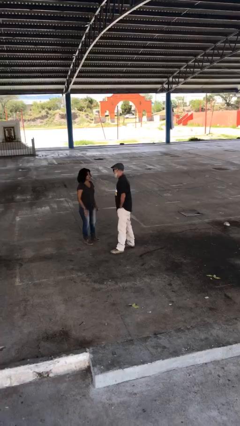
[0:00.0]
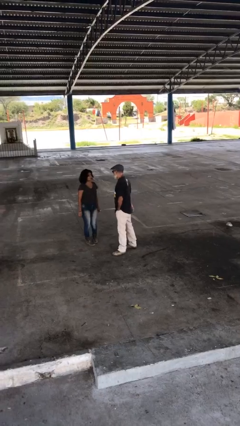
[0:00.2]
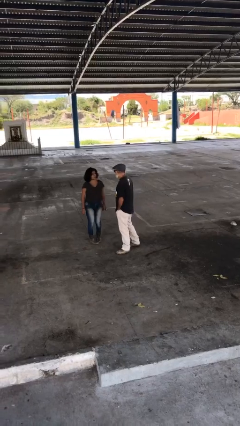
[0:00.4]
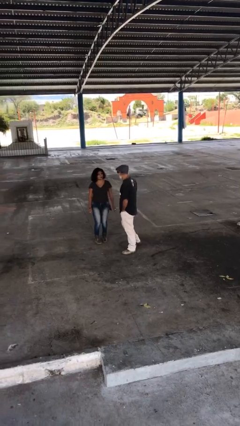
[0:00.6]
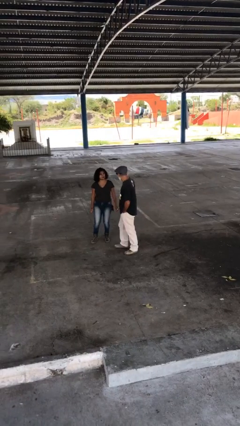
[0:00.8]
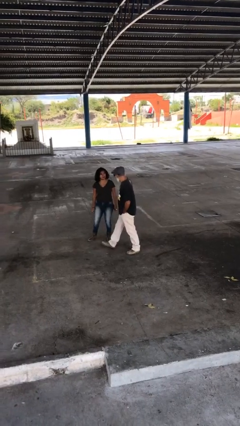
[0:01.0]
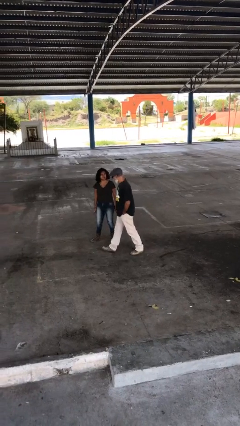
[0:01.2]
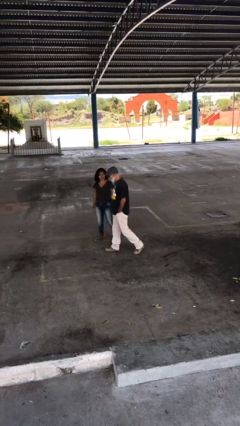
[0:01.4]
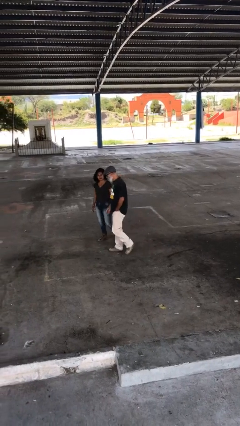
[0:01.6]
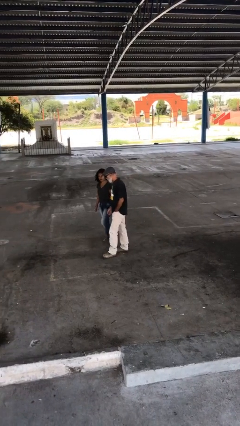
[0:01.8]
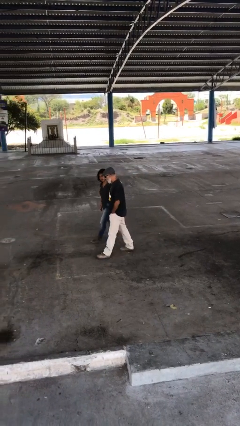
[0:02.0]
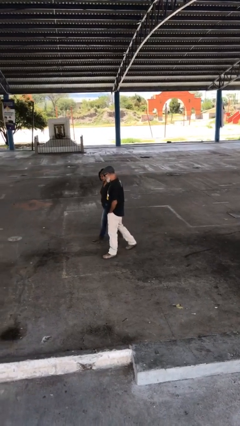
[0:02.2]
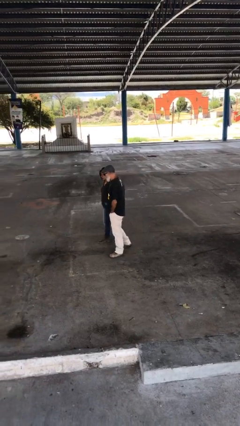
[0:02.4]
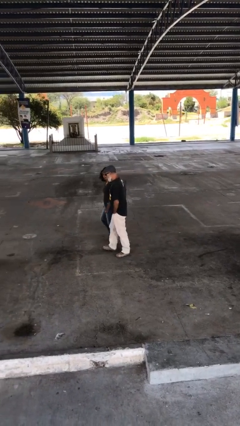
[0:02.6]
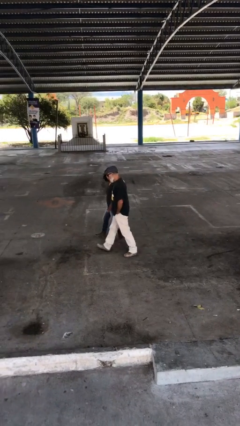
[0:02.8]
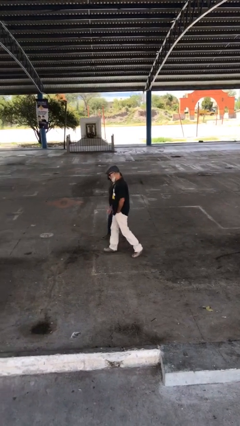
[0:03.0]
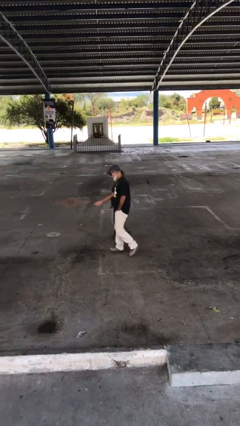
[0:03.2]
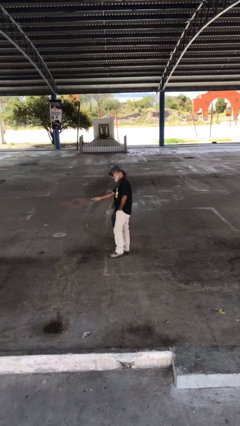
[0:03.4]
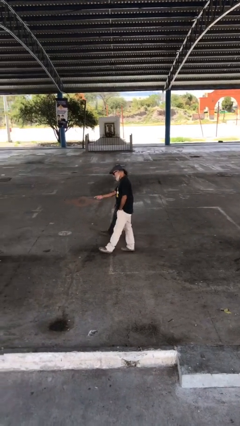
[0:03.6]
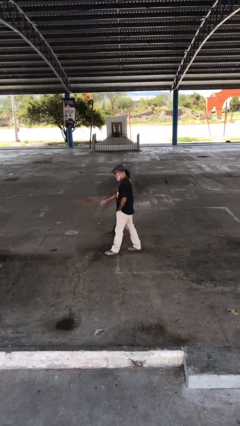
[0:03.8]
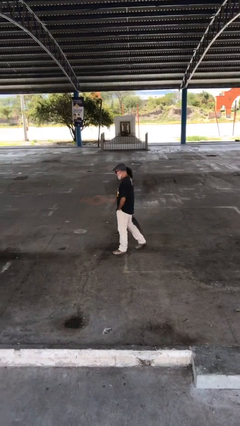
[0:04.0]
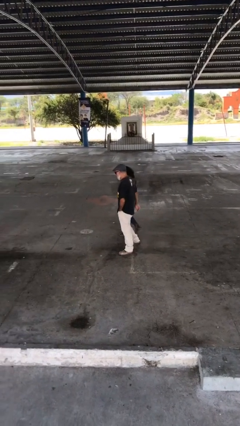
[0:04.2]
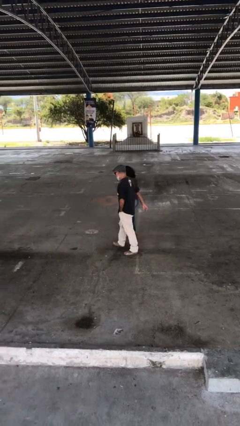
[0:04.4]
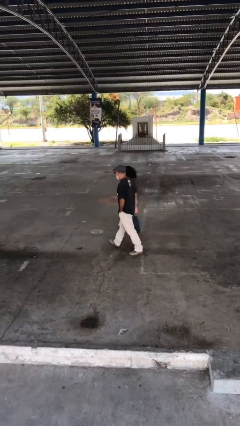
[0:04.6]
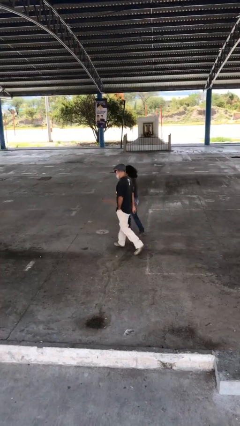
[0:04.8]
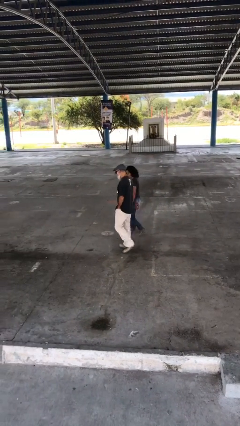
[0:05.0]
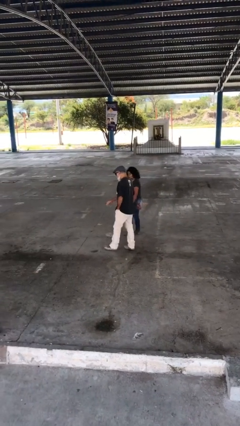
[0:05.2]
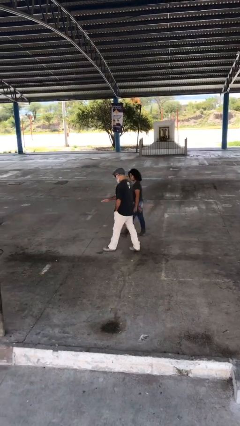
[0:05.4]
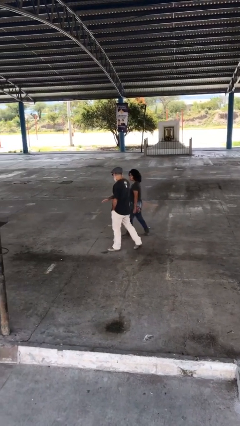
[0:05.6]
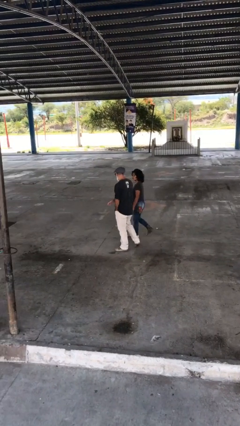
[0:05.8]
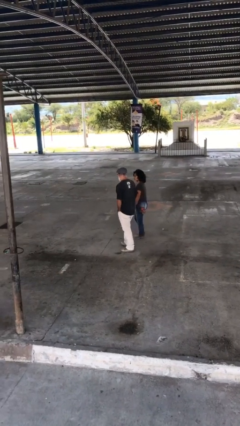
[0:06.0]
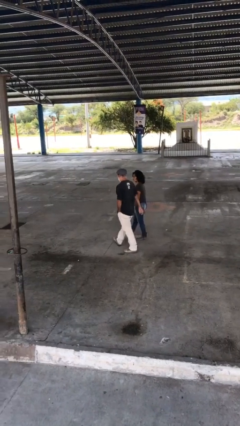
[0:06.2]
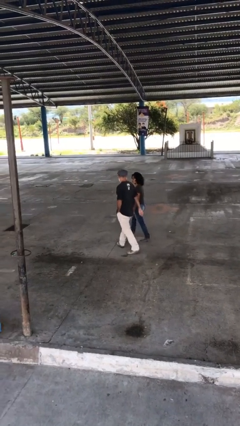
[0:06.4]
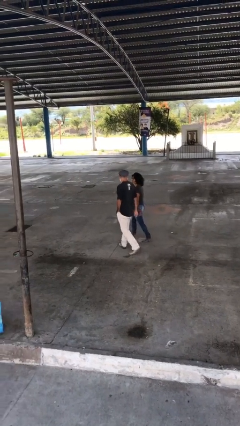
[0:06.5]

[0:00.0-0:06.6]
person talks to person

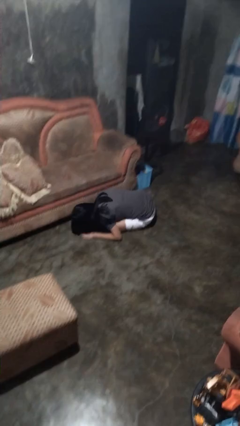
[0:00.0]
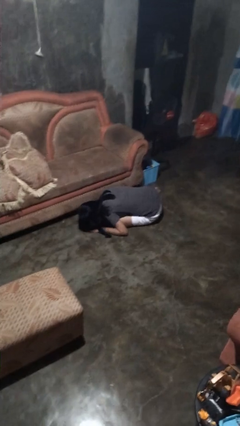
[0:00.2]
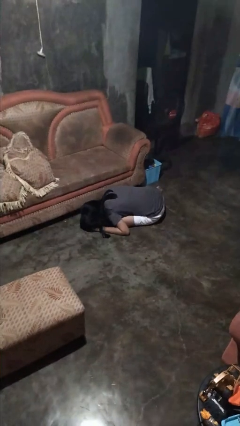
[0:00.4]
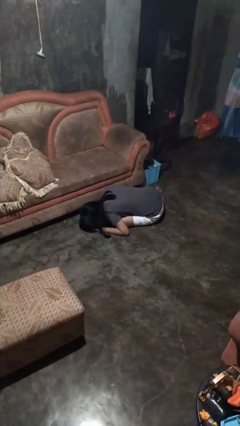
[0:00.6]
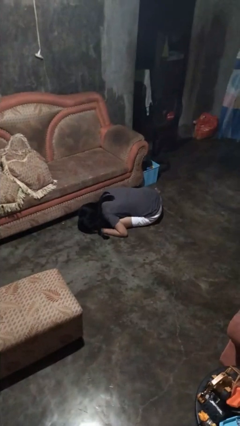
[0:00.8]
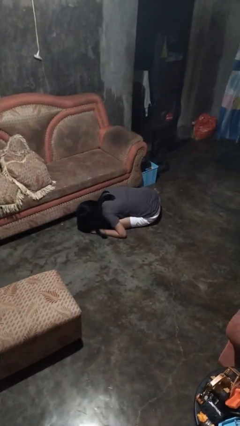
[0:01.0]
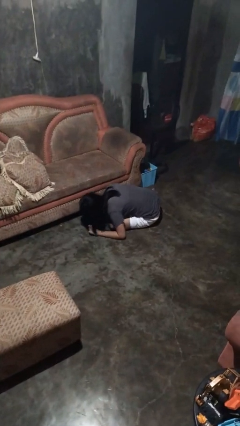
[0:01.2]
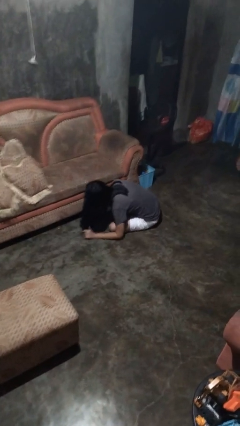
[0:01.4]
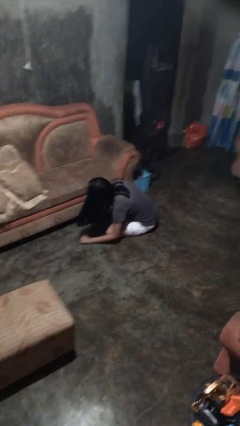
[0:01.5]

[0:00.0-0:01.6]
person searches under couch

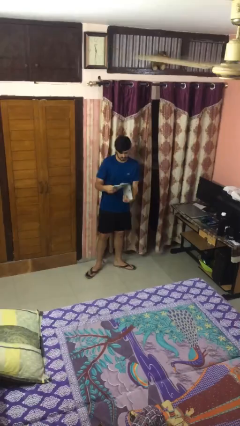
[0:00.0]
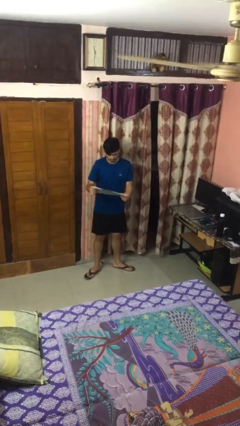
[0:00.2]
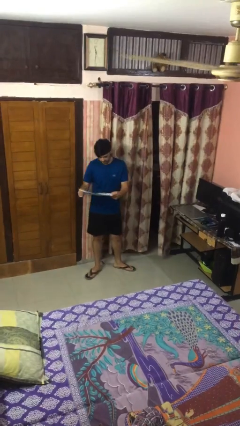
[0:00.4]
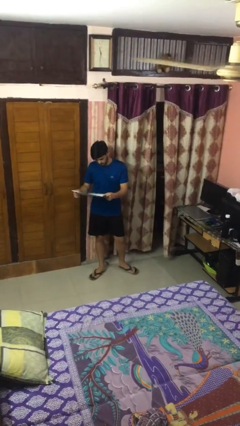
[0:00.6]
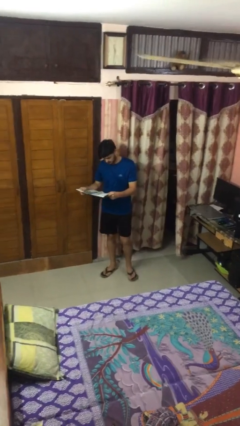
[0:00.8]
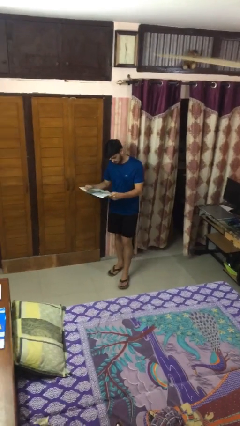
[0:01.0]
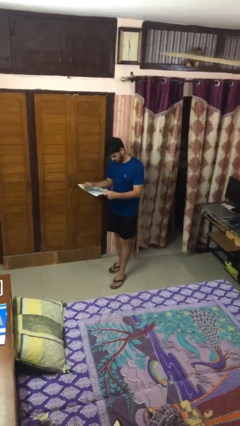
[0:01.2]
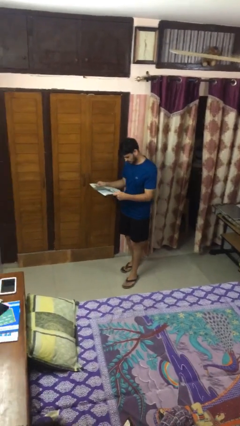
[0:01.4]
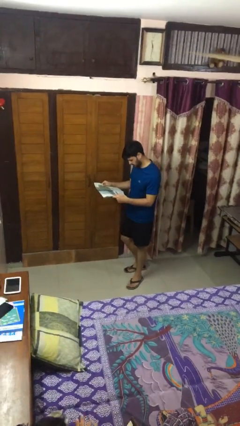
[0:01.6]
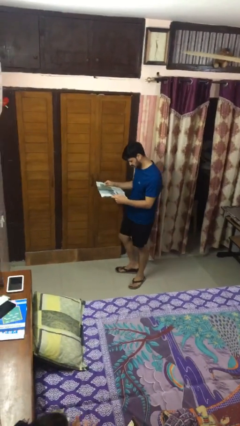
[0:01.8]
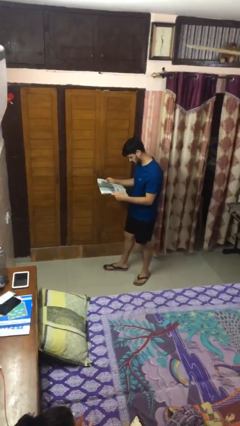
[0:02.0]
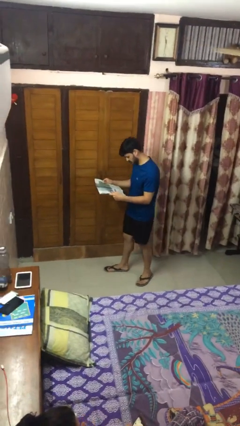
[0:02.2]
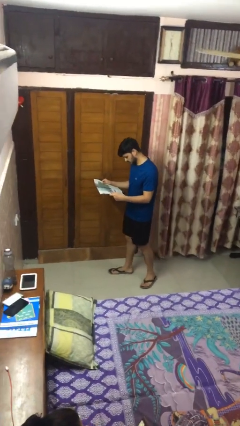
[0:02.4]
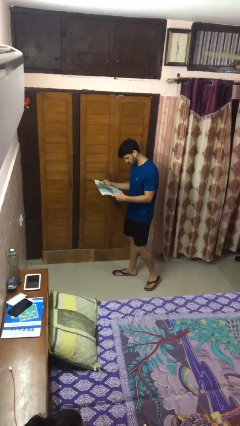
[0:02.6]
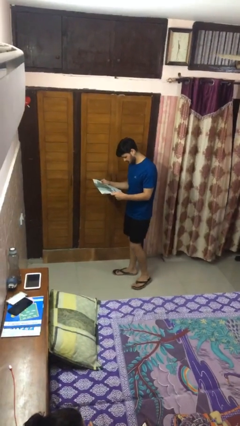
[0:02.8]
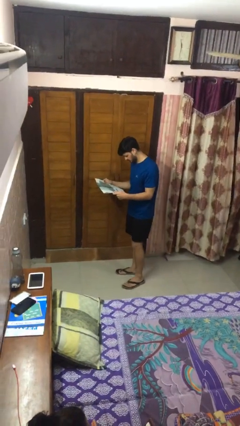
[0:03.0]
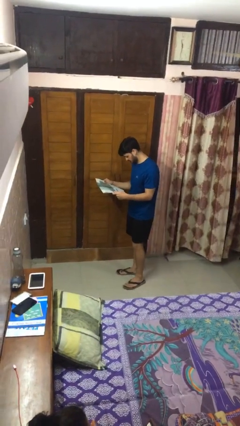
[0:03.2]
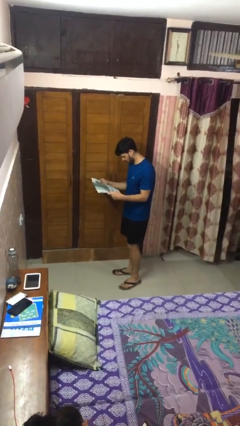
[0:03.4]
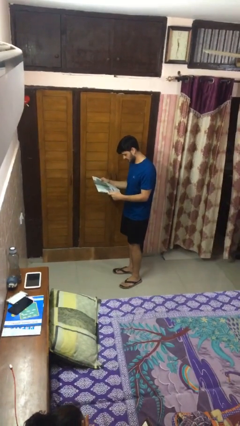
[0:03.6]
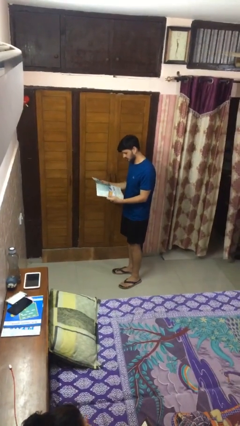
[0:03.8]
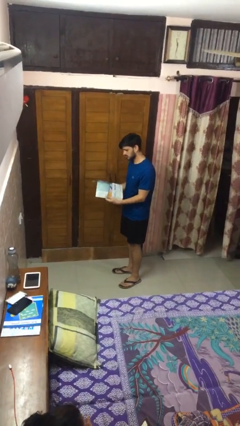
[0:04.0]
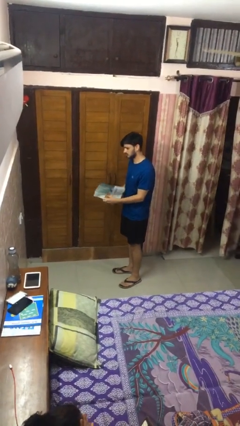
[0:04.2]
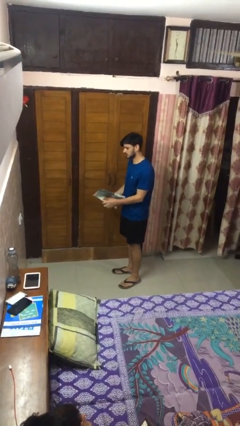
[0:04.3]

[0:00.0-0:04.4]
person reads newspaper

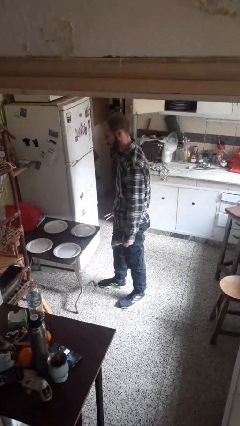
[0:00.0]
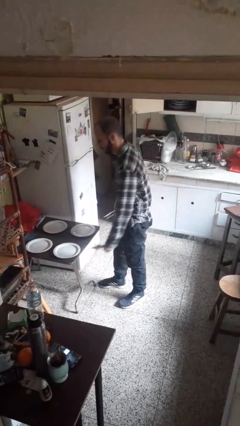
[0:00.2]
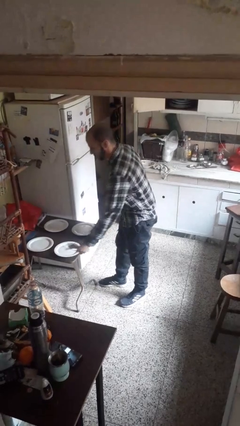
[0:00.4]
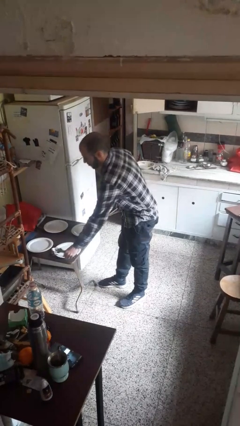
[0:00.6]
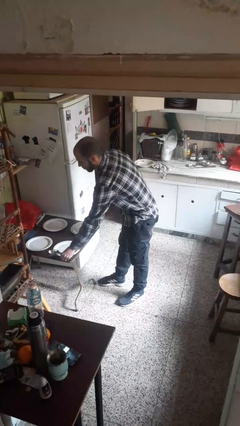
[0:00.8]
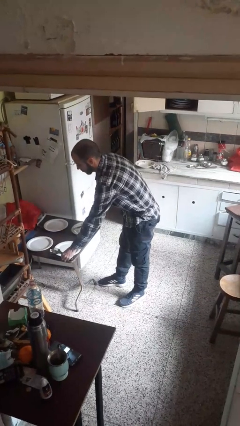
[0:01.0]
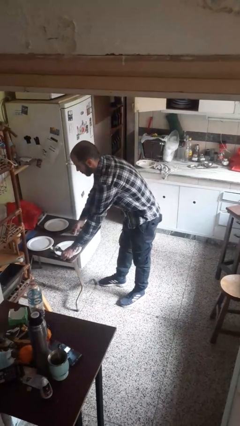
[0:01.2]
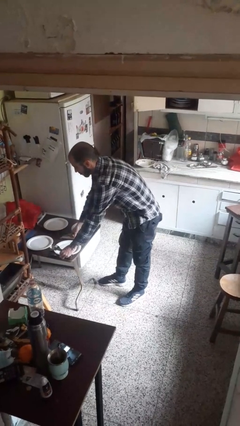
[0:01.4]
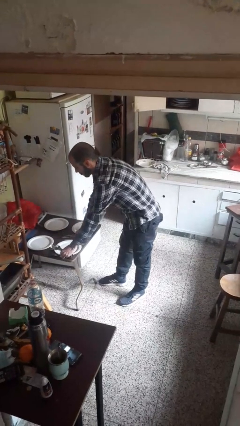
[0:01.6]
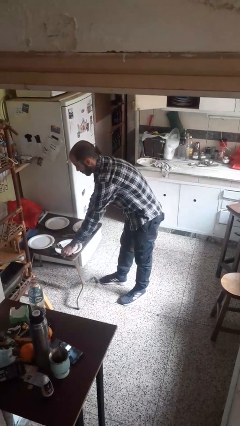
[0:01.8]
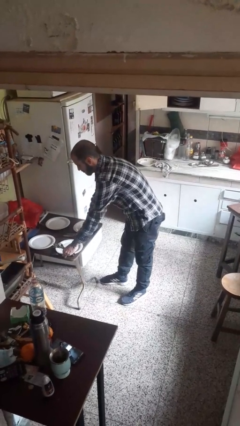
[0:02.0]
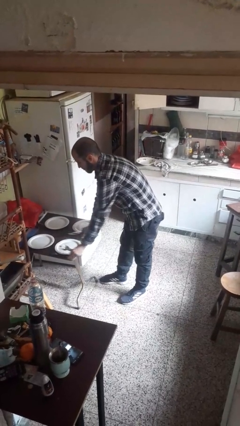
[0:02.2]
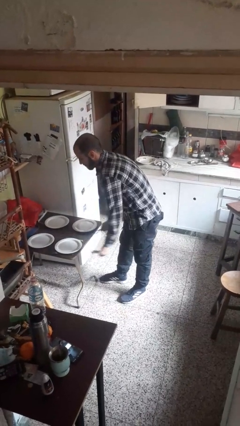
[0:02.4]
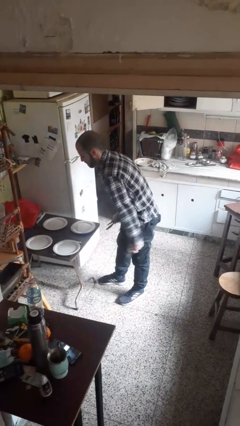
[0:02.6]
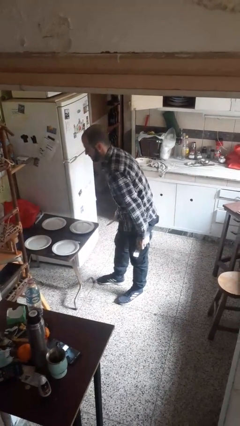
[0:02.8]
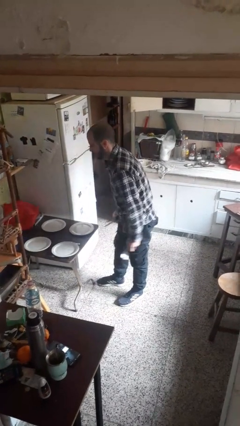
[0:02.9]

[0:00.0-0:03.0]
person sets table

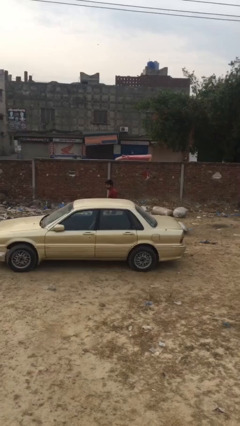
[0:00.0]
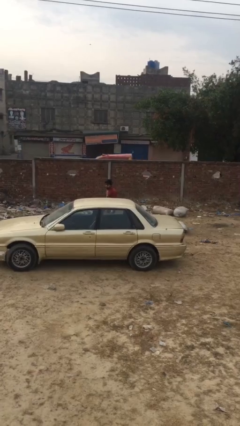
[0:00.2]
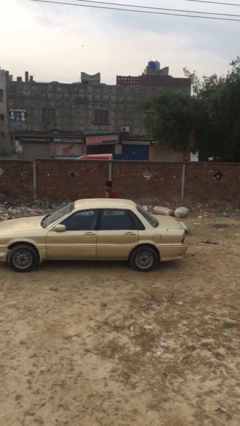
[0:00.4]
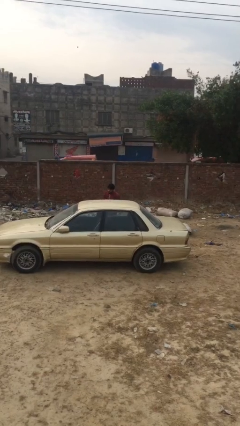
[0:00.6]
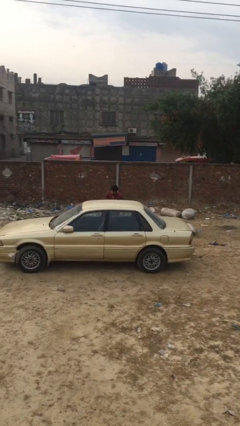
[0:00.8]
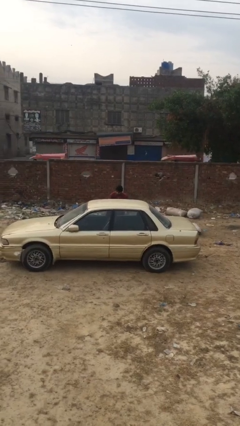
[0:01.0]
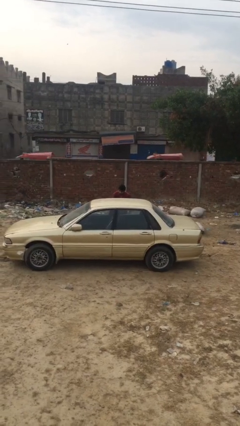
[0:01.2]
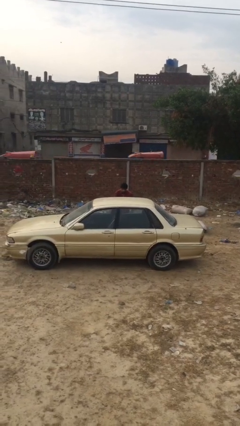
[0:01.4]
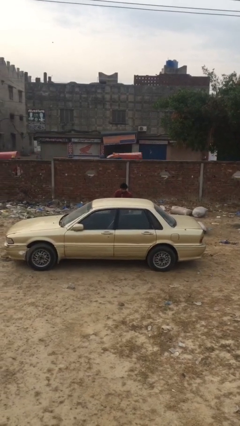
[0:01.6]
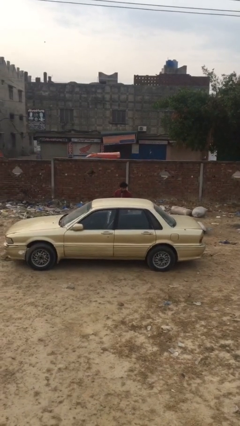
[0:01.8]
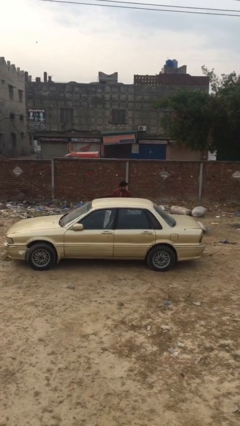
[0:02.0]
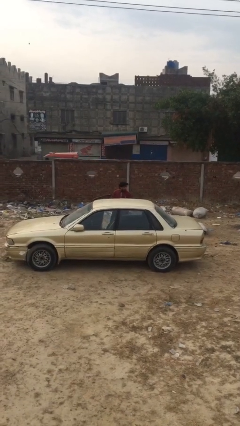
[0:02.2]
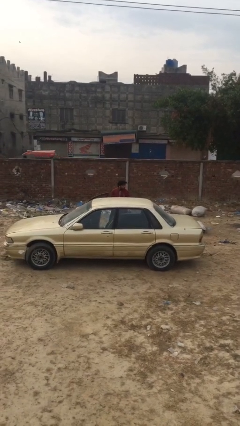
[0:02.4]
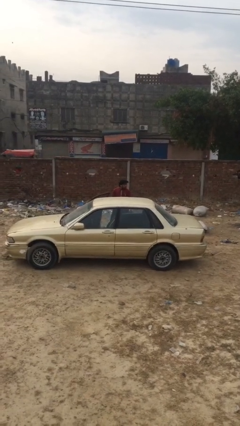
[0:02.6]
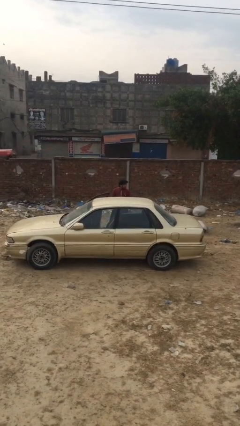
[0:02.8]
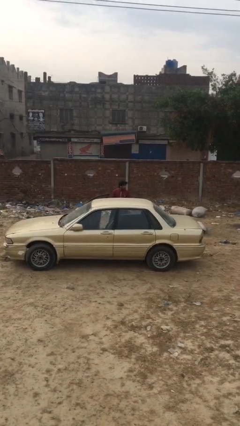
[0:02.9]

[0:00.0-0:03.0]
person opens car door
